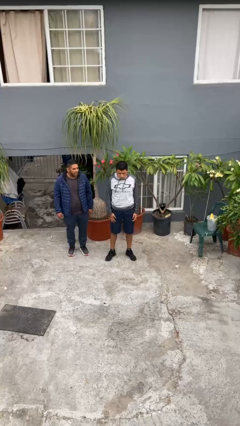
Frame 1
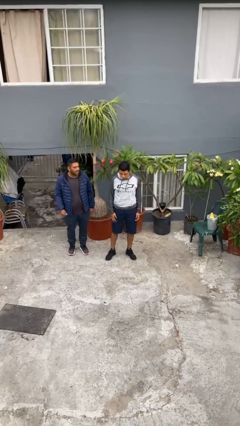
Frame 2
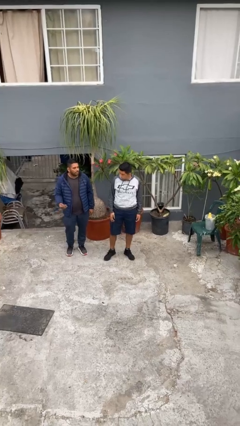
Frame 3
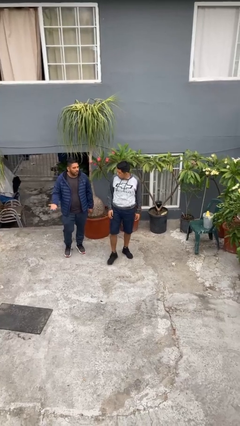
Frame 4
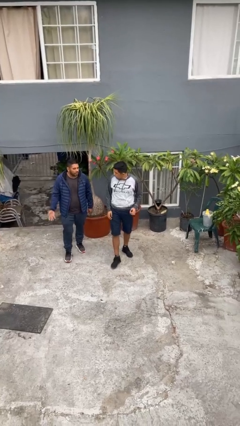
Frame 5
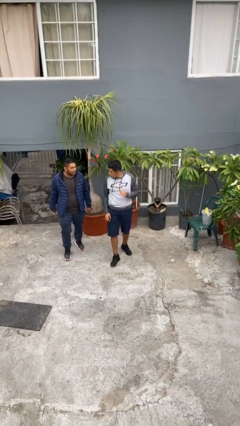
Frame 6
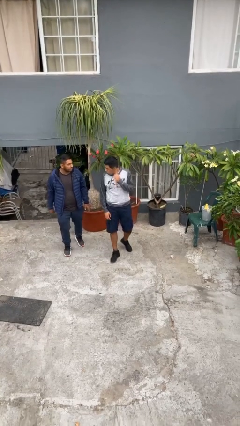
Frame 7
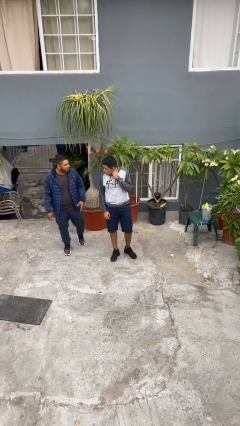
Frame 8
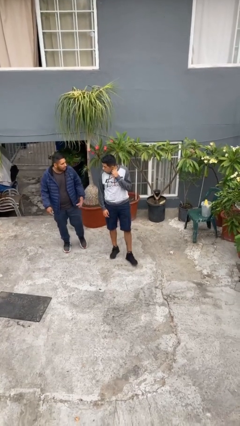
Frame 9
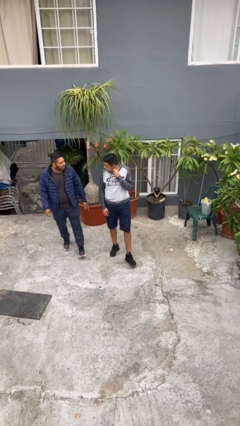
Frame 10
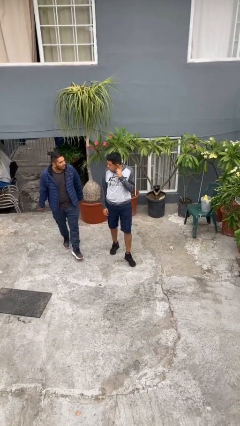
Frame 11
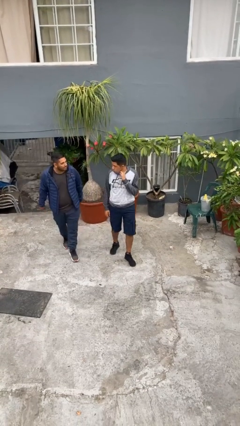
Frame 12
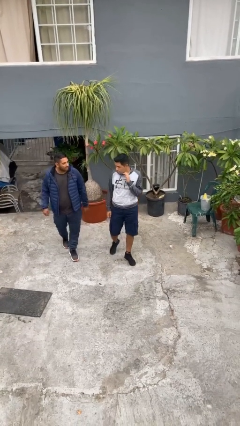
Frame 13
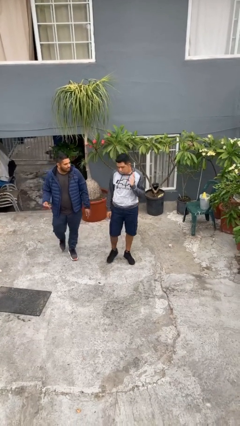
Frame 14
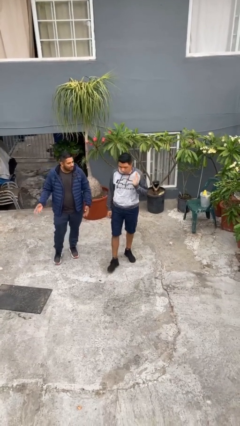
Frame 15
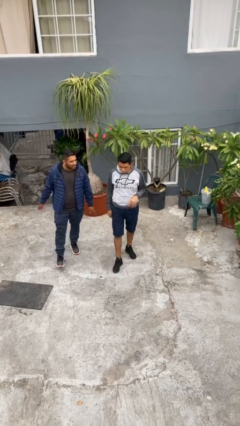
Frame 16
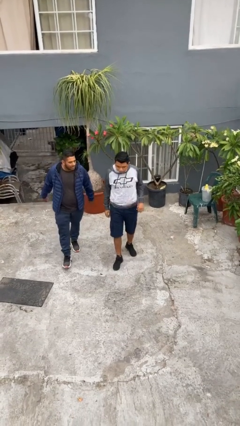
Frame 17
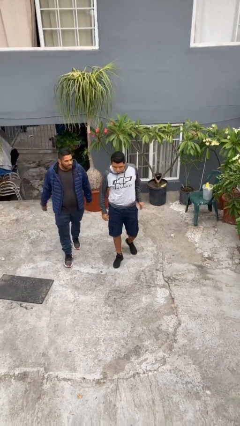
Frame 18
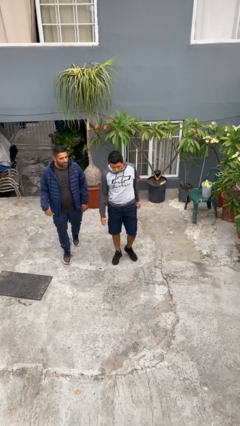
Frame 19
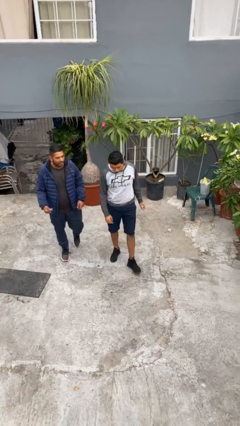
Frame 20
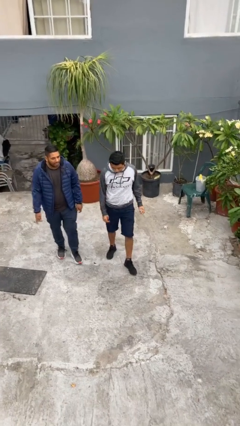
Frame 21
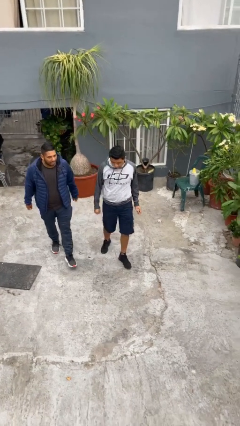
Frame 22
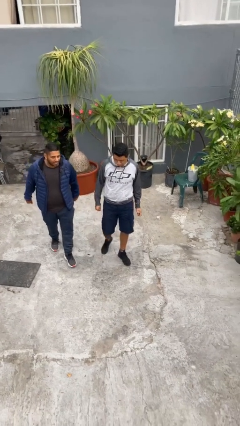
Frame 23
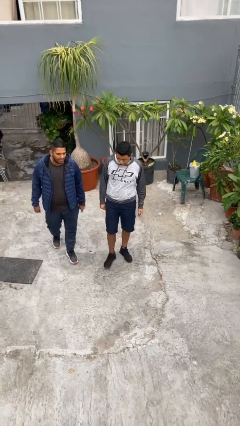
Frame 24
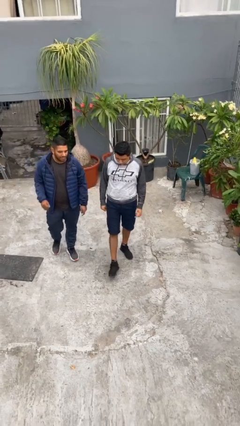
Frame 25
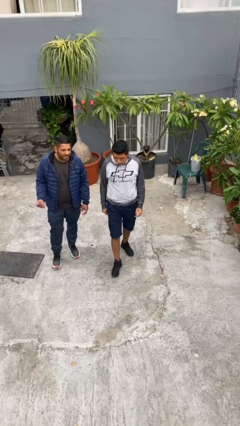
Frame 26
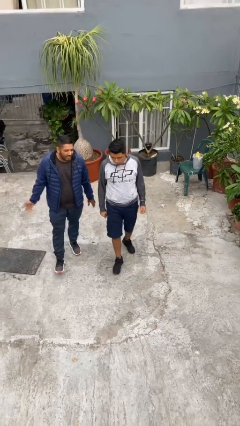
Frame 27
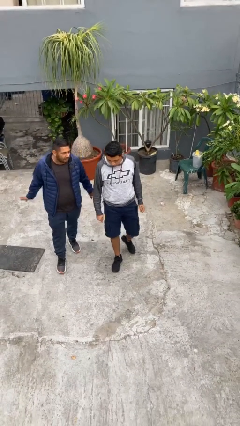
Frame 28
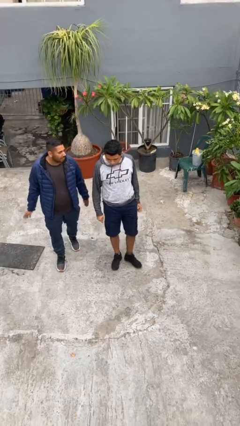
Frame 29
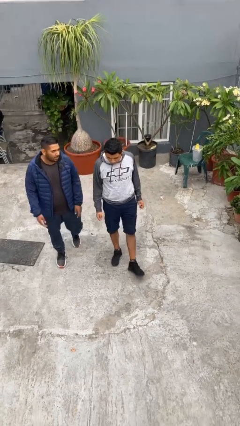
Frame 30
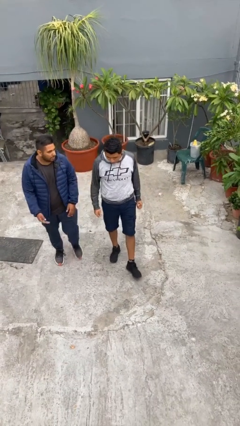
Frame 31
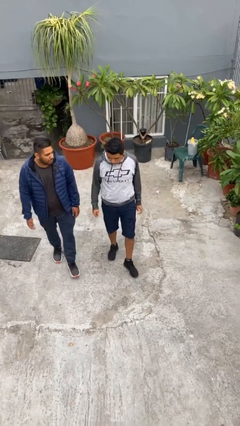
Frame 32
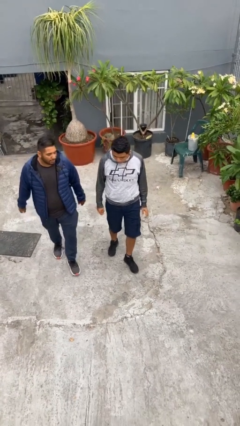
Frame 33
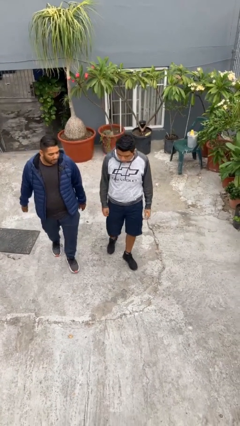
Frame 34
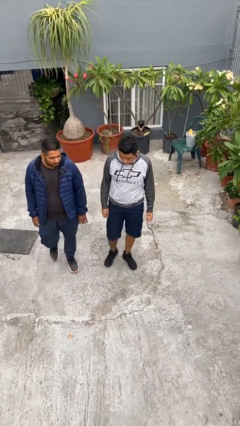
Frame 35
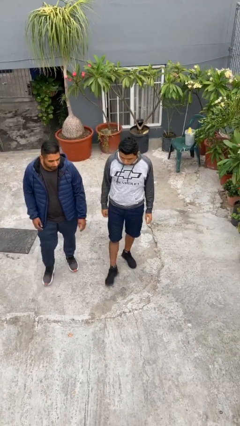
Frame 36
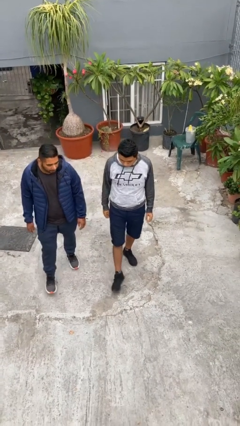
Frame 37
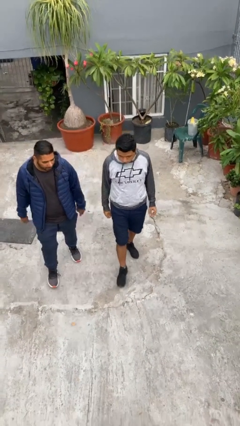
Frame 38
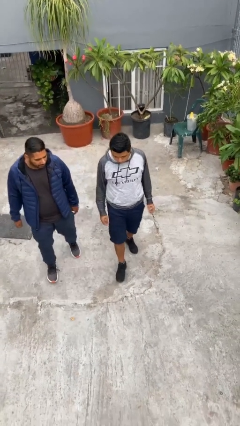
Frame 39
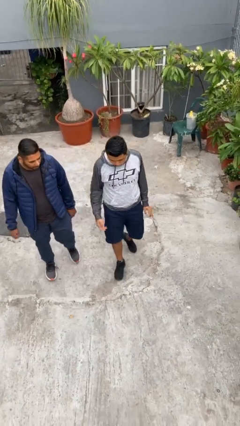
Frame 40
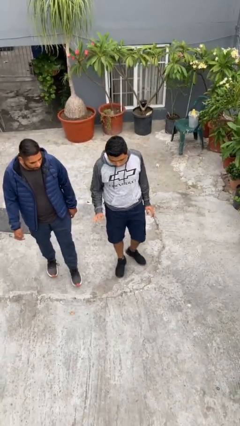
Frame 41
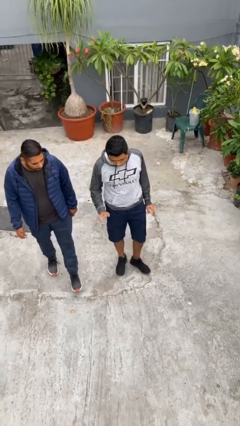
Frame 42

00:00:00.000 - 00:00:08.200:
person talks to person

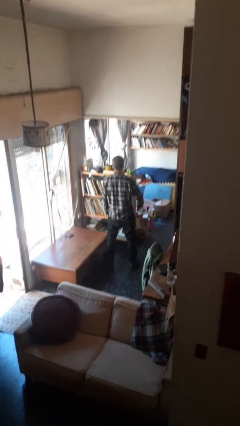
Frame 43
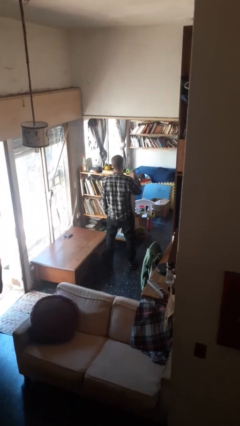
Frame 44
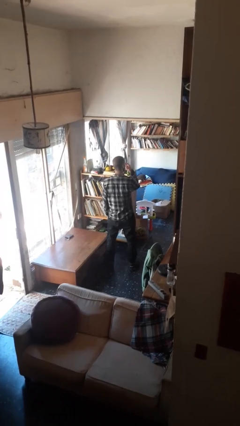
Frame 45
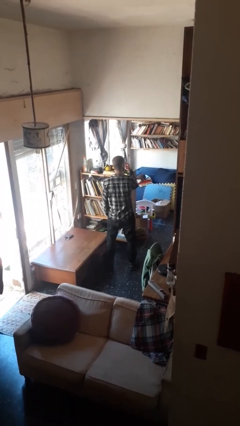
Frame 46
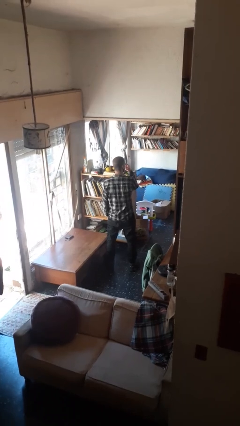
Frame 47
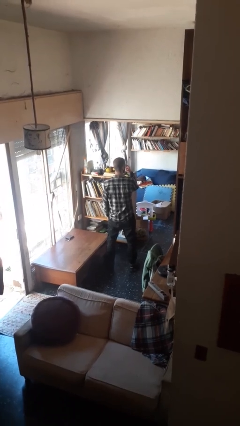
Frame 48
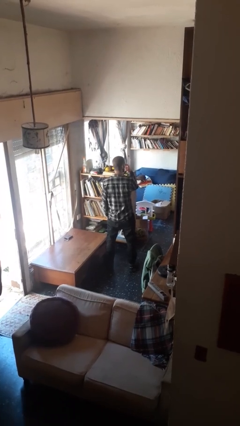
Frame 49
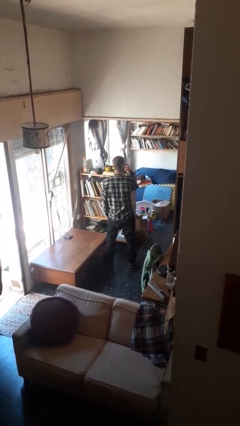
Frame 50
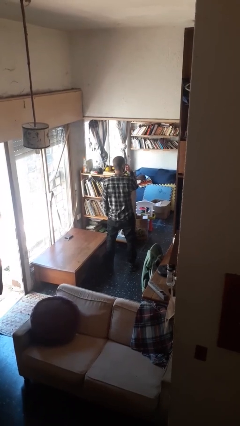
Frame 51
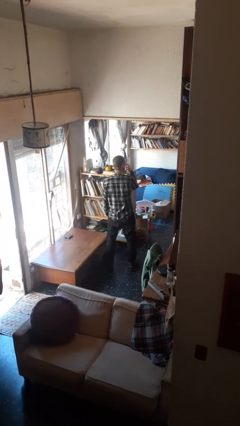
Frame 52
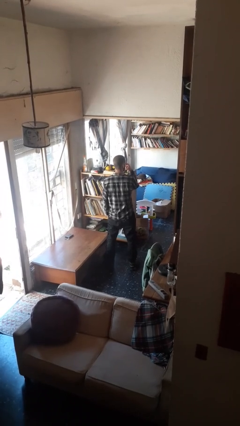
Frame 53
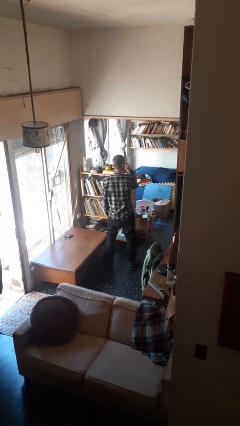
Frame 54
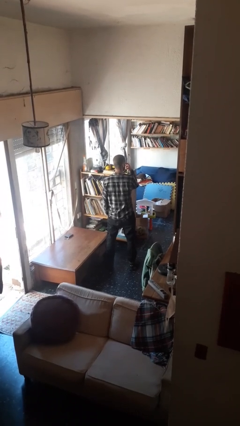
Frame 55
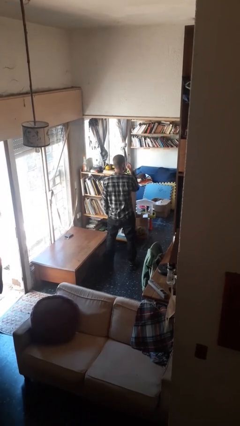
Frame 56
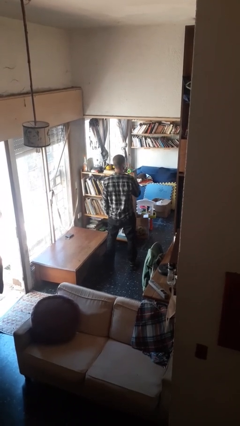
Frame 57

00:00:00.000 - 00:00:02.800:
person gestures watch closely

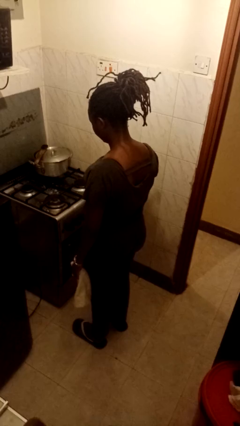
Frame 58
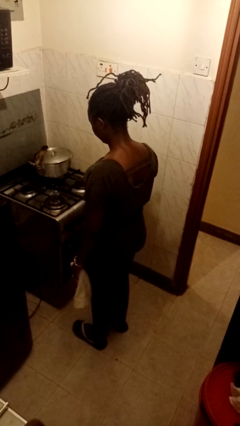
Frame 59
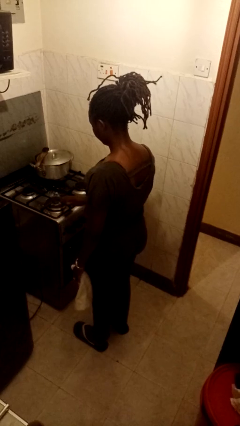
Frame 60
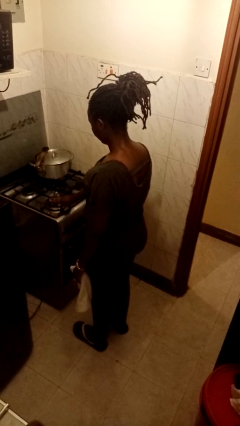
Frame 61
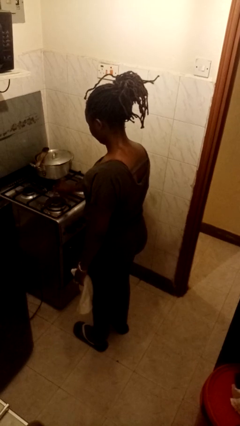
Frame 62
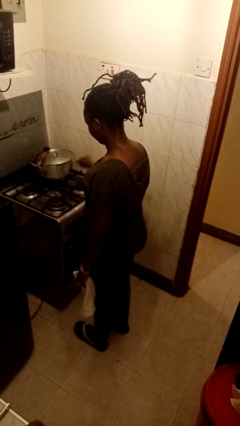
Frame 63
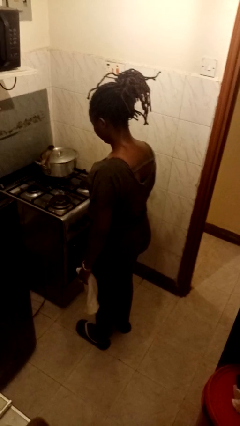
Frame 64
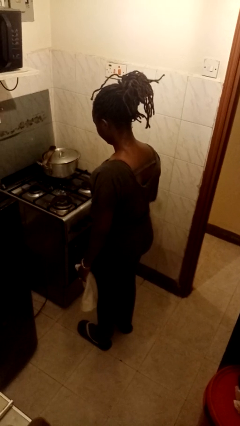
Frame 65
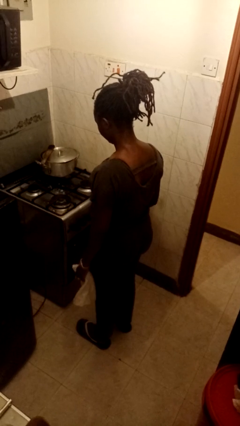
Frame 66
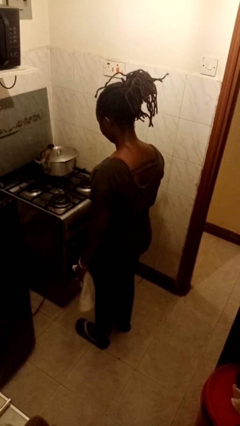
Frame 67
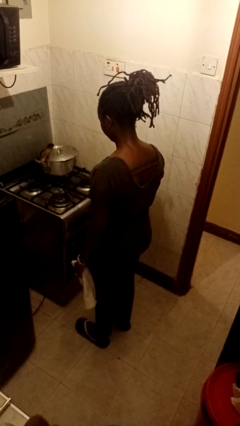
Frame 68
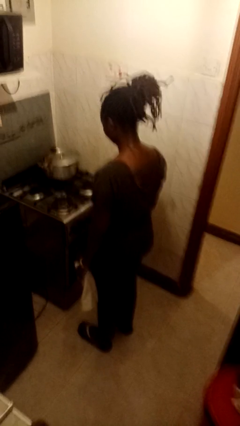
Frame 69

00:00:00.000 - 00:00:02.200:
person burns hand

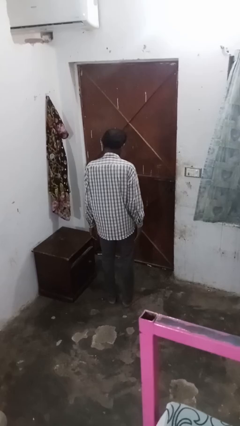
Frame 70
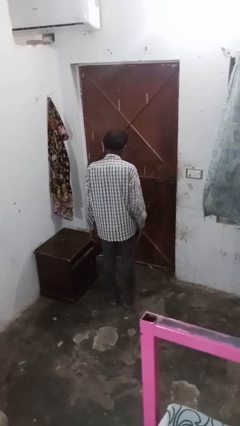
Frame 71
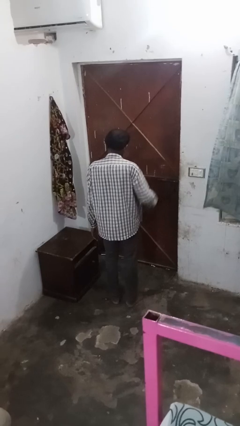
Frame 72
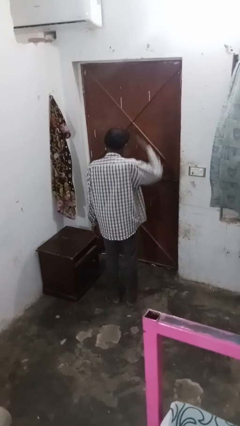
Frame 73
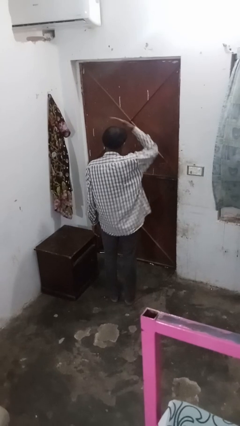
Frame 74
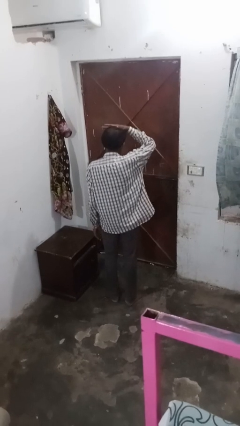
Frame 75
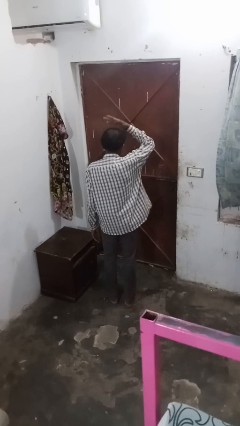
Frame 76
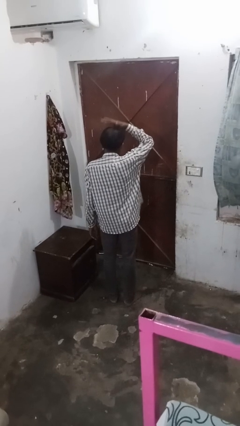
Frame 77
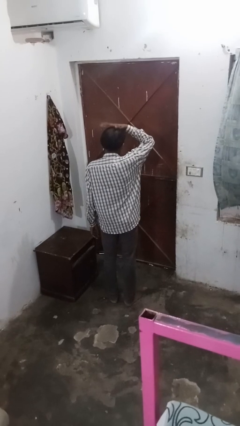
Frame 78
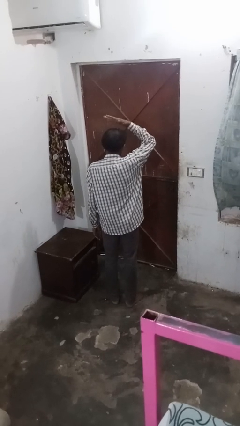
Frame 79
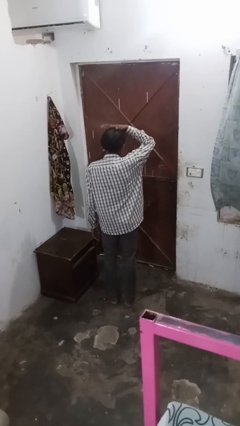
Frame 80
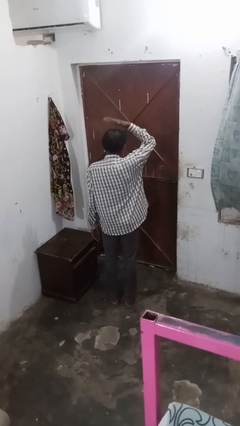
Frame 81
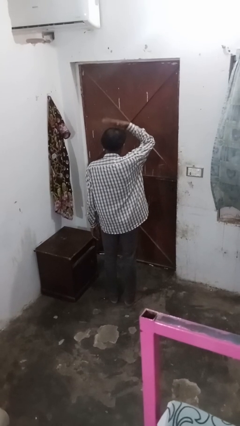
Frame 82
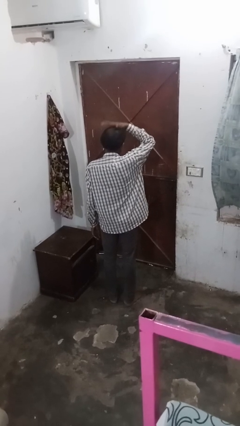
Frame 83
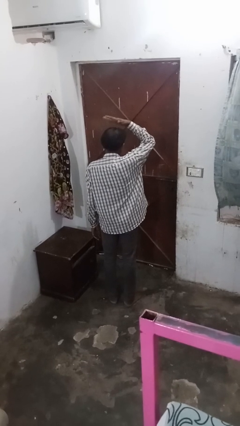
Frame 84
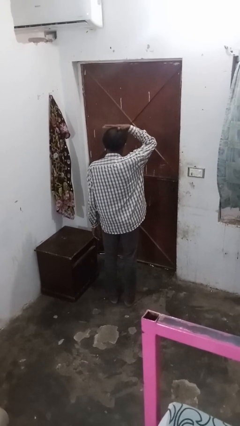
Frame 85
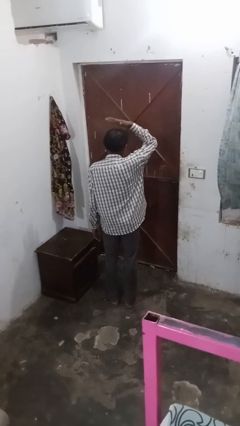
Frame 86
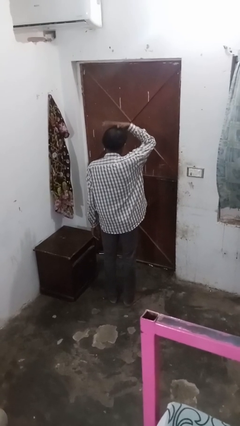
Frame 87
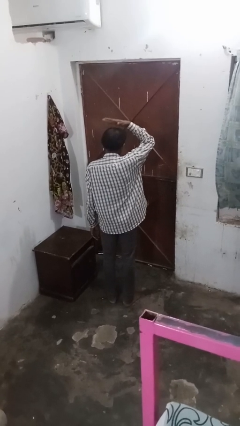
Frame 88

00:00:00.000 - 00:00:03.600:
person pats head

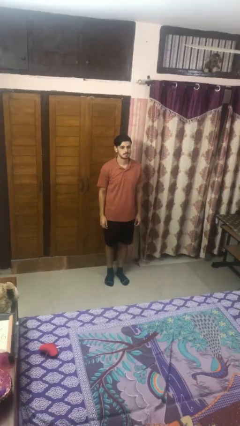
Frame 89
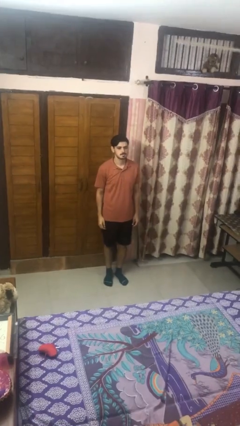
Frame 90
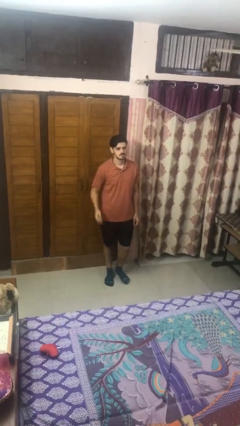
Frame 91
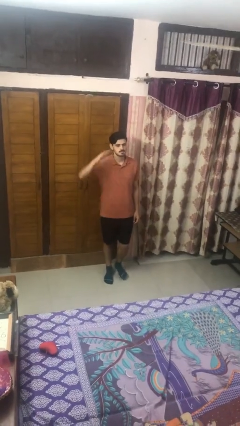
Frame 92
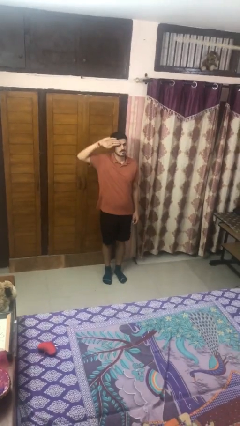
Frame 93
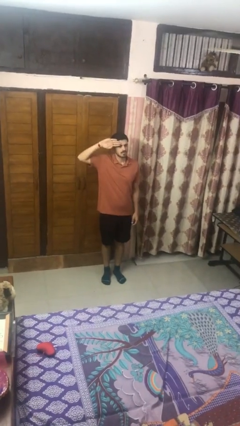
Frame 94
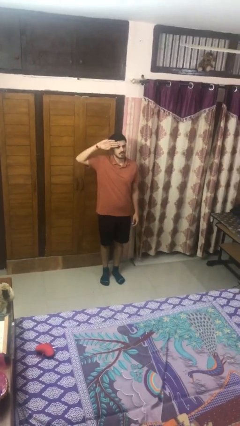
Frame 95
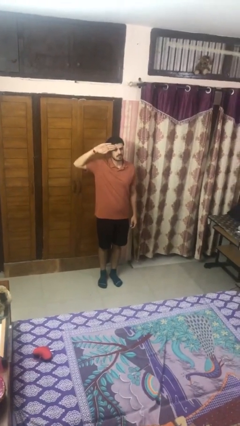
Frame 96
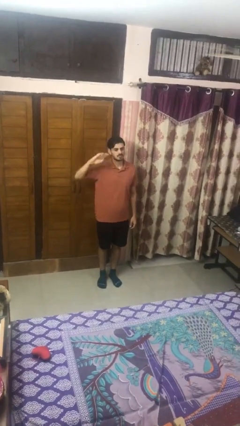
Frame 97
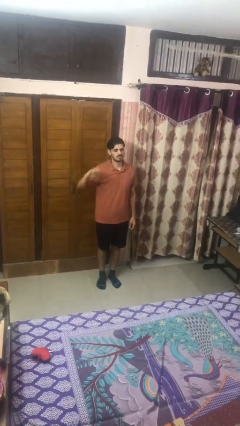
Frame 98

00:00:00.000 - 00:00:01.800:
person salutes
